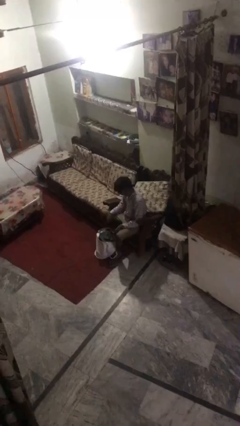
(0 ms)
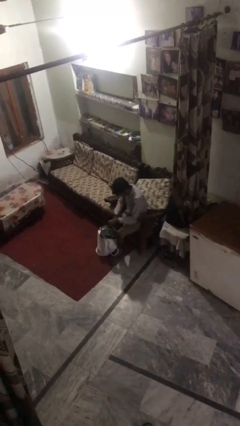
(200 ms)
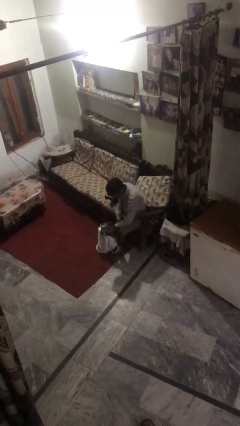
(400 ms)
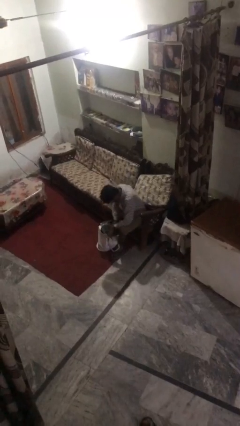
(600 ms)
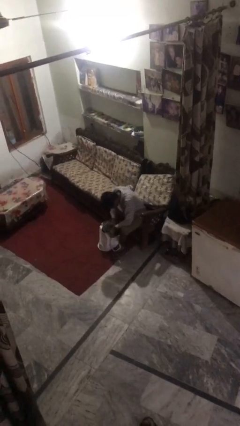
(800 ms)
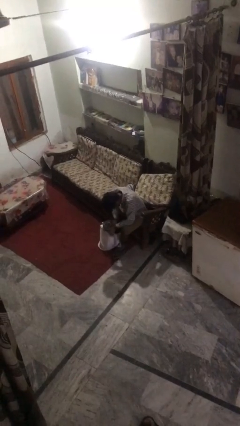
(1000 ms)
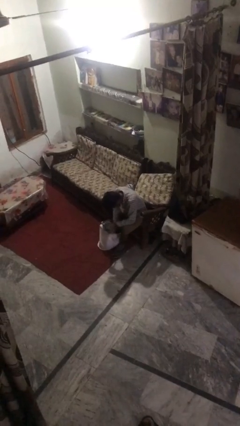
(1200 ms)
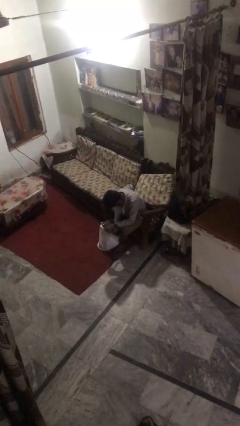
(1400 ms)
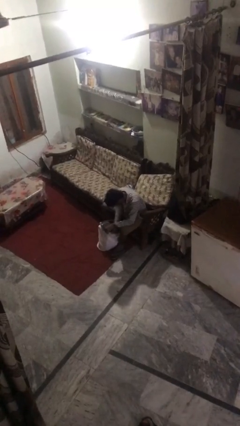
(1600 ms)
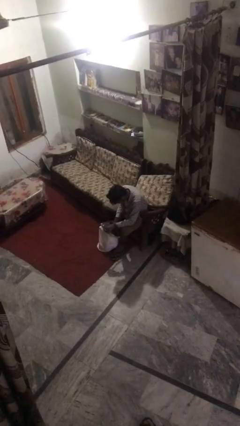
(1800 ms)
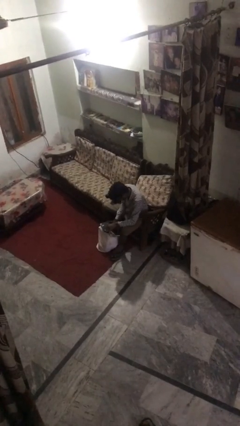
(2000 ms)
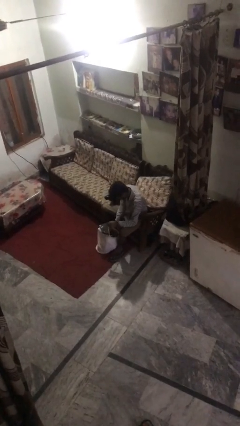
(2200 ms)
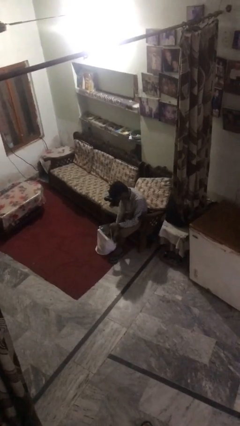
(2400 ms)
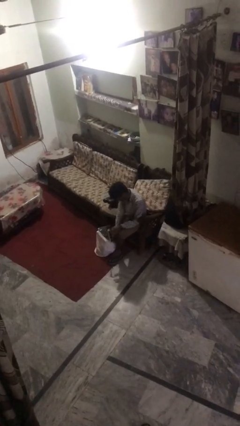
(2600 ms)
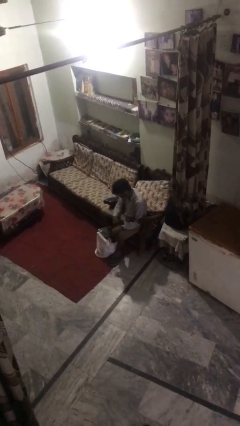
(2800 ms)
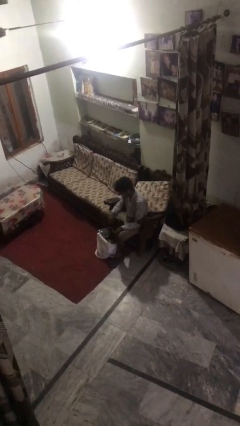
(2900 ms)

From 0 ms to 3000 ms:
person searches under bed

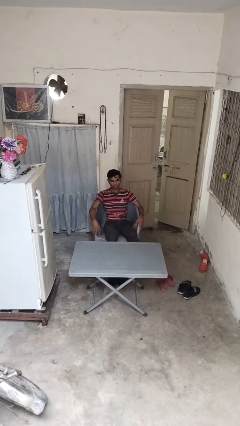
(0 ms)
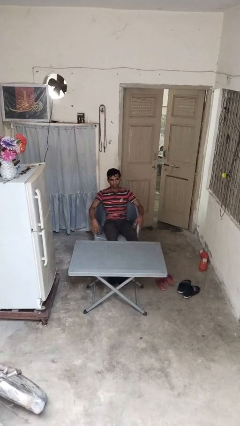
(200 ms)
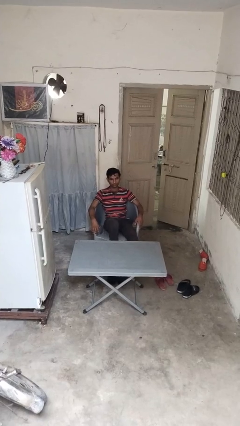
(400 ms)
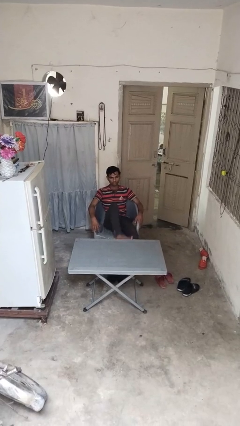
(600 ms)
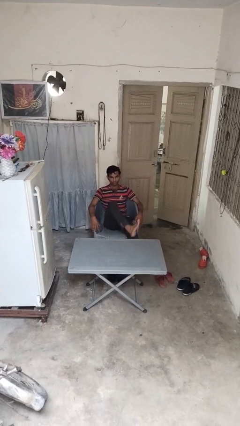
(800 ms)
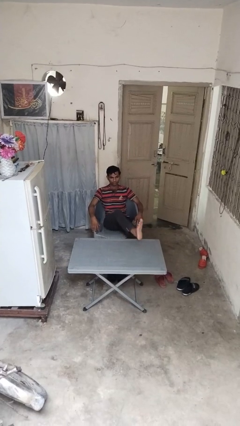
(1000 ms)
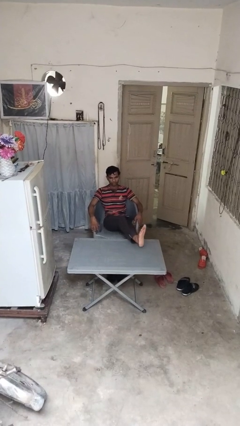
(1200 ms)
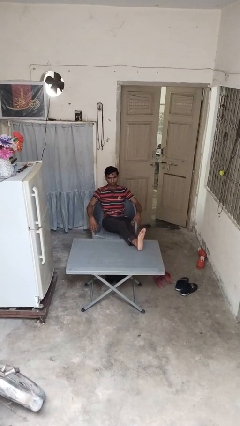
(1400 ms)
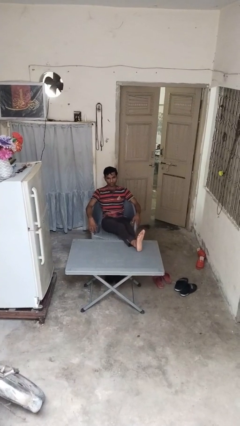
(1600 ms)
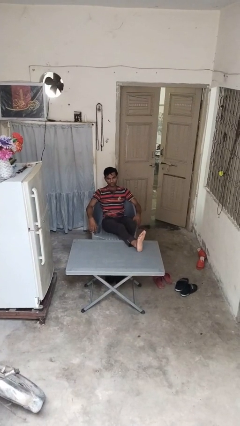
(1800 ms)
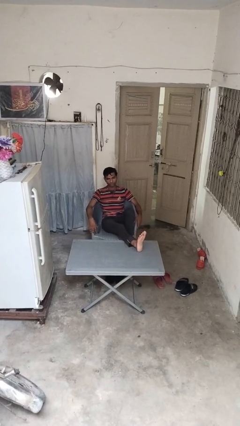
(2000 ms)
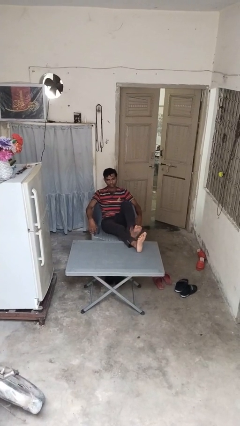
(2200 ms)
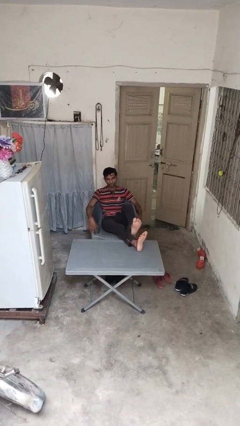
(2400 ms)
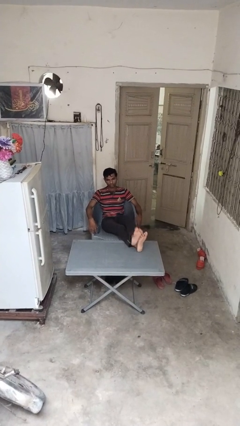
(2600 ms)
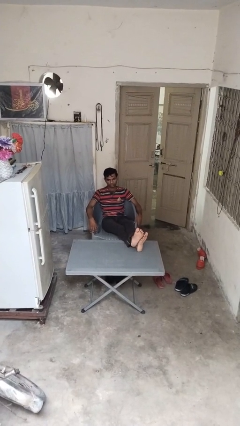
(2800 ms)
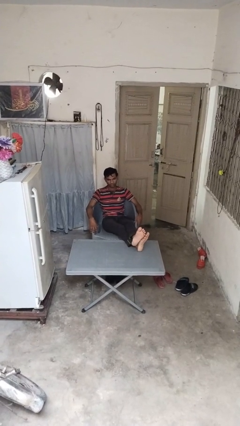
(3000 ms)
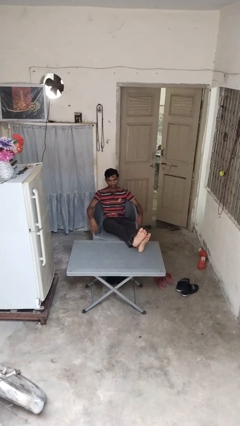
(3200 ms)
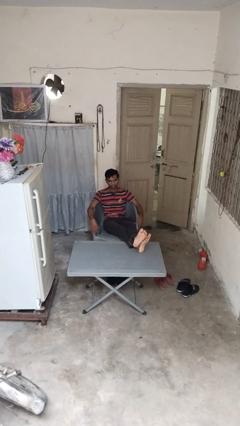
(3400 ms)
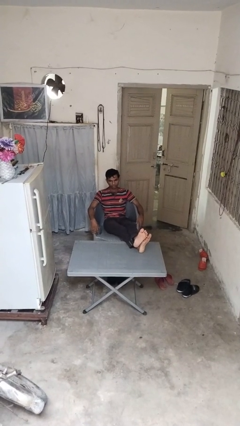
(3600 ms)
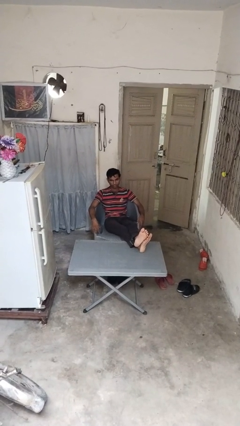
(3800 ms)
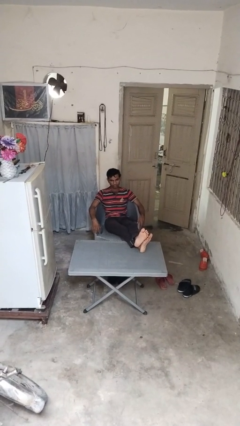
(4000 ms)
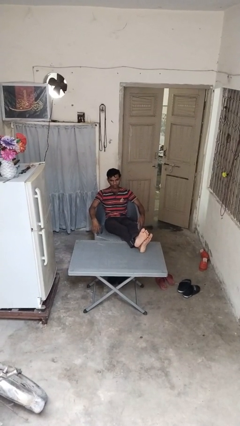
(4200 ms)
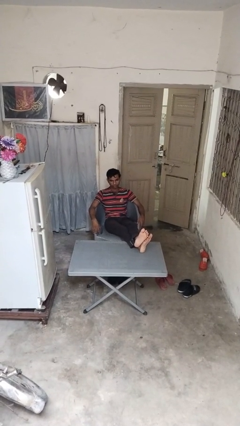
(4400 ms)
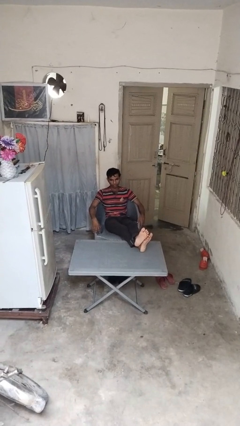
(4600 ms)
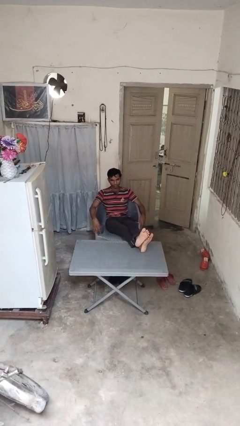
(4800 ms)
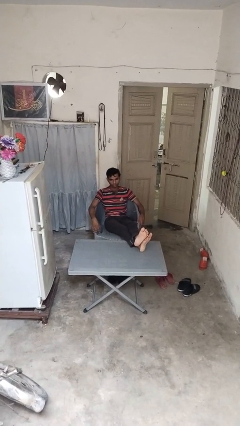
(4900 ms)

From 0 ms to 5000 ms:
person puts feet up

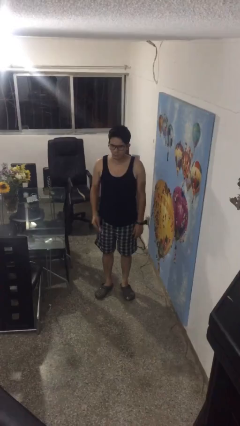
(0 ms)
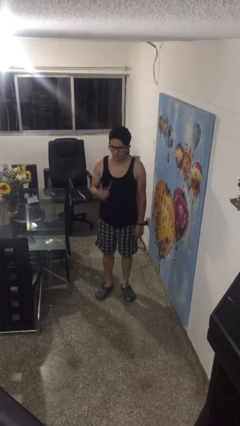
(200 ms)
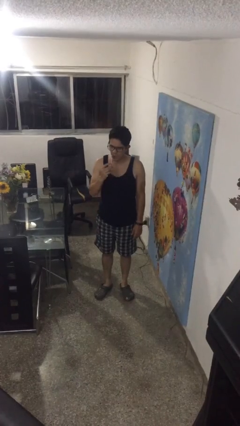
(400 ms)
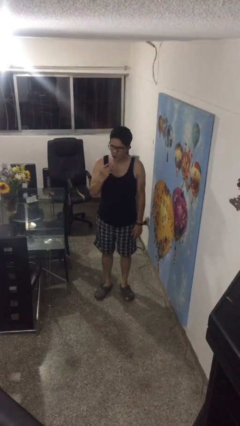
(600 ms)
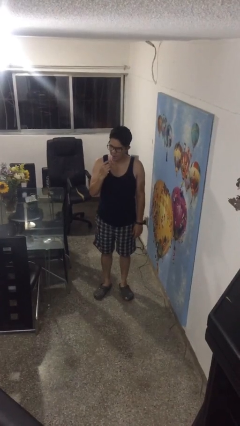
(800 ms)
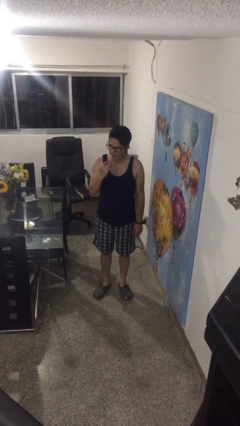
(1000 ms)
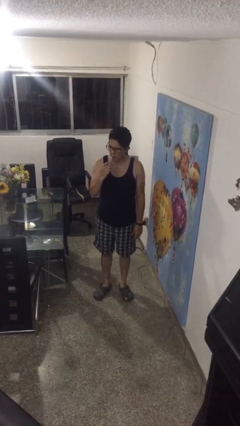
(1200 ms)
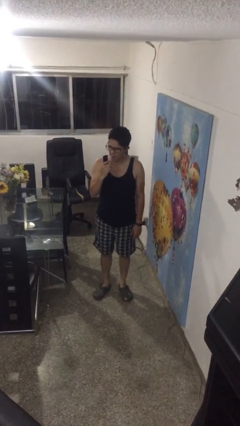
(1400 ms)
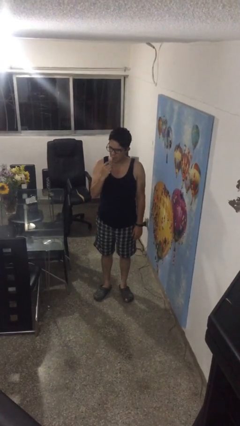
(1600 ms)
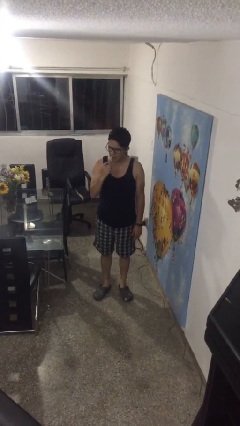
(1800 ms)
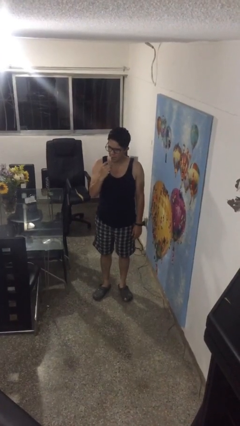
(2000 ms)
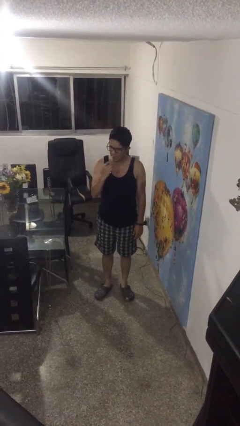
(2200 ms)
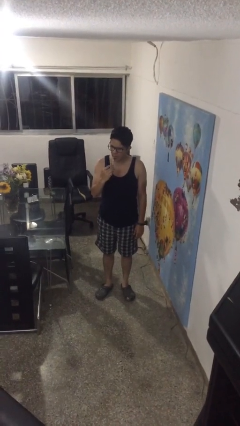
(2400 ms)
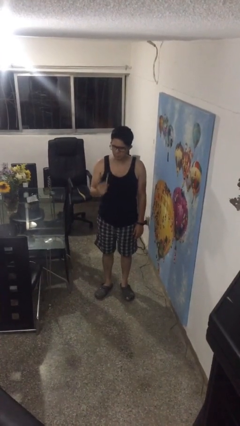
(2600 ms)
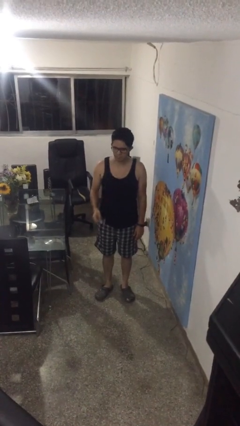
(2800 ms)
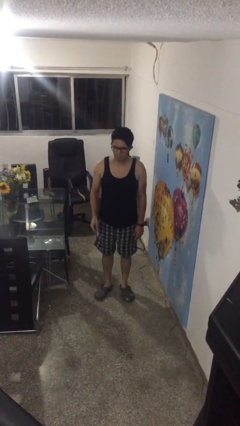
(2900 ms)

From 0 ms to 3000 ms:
person brushes teeth

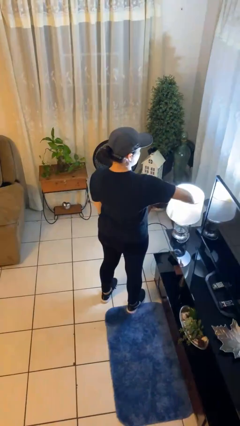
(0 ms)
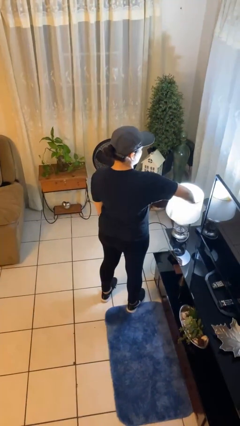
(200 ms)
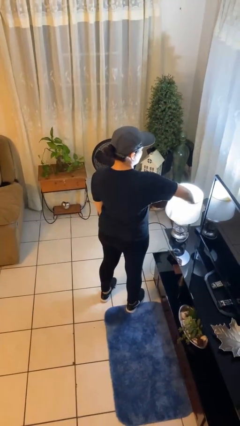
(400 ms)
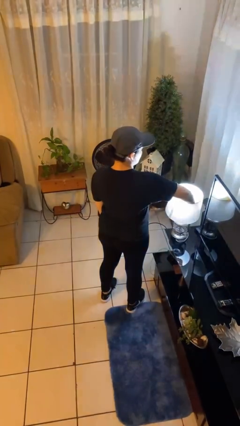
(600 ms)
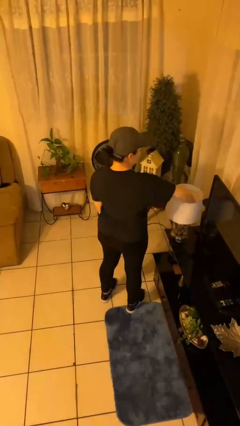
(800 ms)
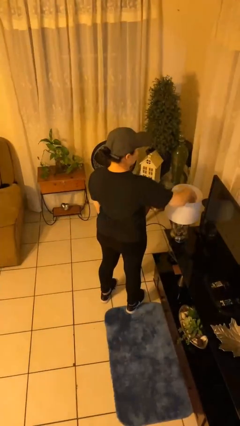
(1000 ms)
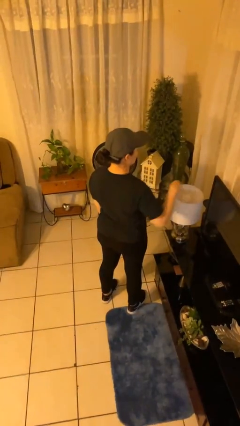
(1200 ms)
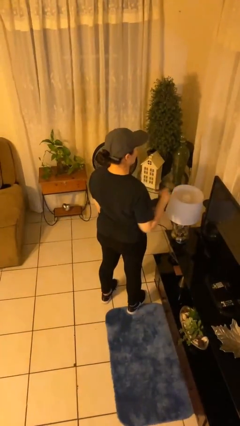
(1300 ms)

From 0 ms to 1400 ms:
person turns off lamp

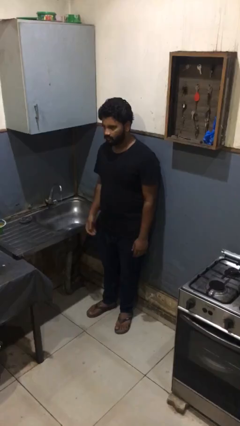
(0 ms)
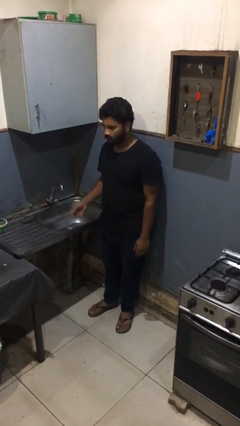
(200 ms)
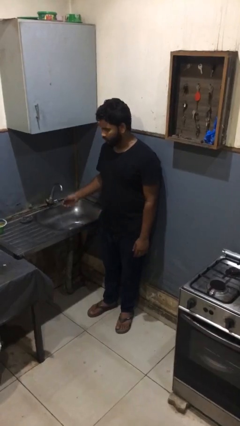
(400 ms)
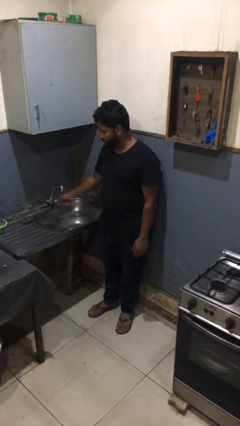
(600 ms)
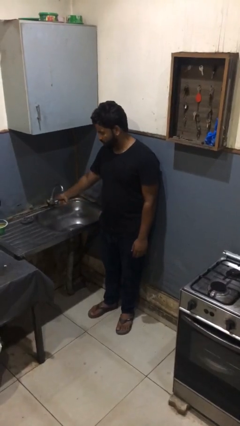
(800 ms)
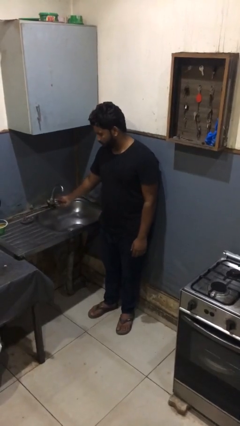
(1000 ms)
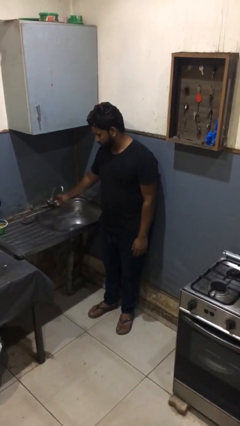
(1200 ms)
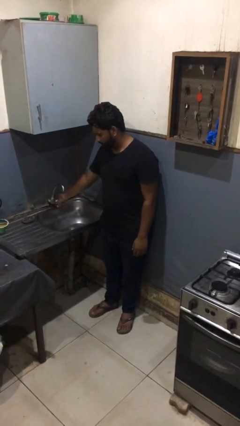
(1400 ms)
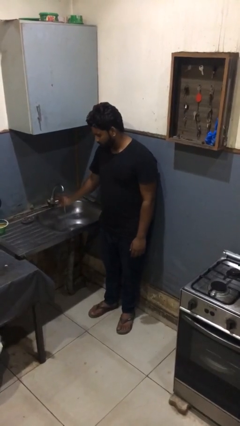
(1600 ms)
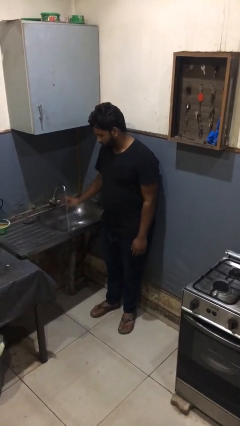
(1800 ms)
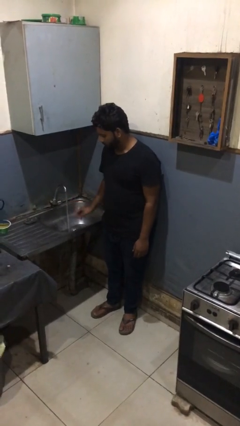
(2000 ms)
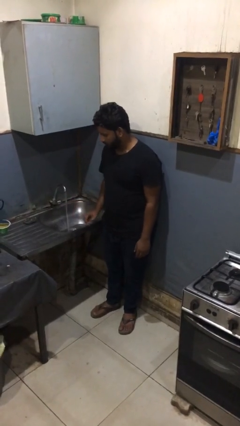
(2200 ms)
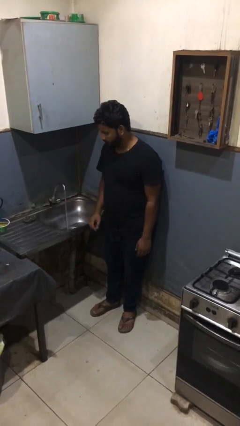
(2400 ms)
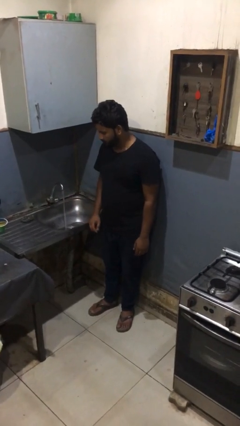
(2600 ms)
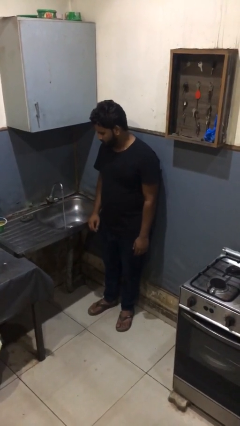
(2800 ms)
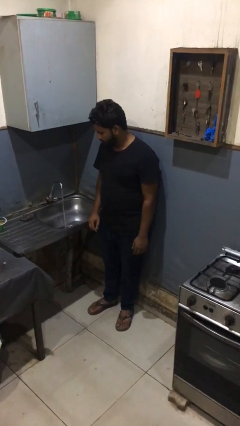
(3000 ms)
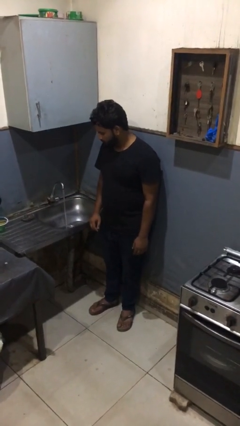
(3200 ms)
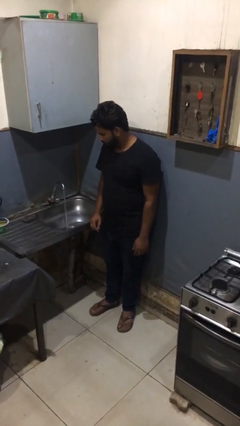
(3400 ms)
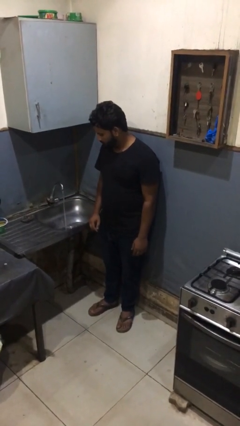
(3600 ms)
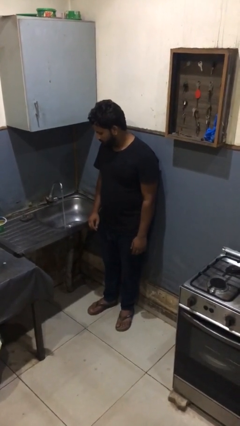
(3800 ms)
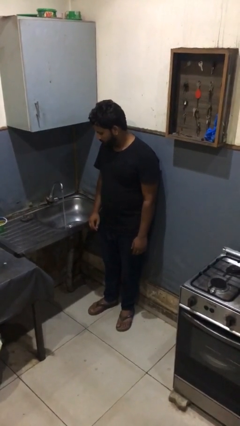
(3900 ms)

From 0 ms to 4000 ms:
person turns on faucet

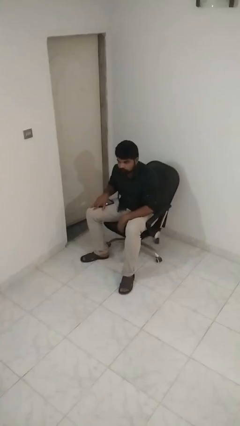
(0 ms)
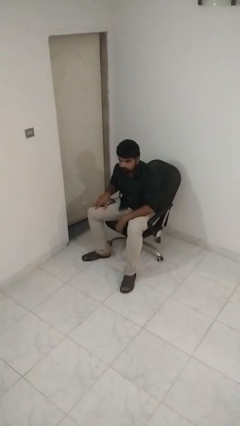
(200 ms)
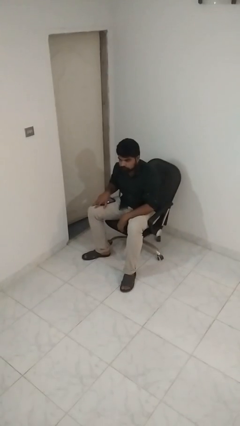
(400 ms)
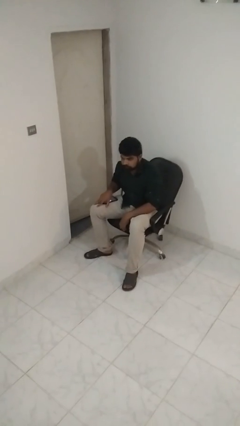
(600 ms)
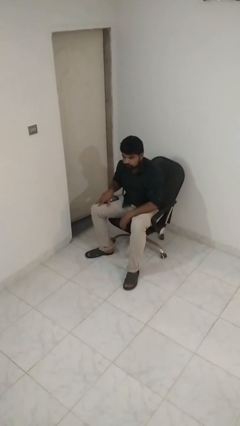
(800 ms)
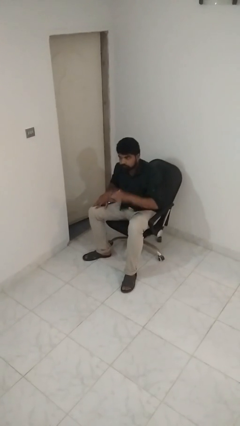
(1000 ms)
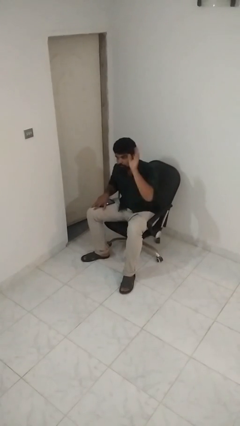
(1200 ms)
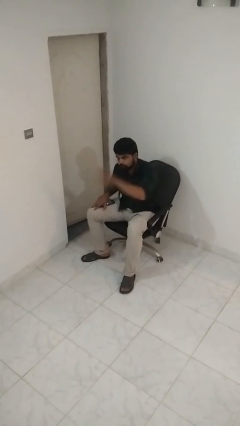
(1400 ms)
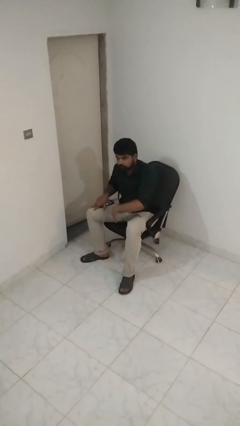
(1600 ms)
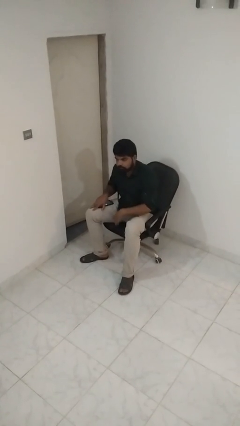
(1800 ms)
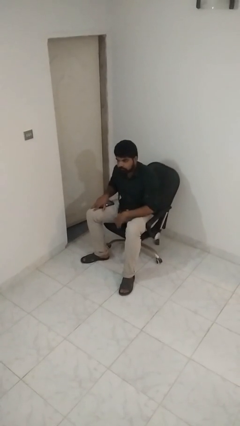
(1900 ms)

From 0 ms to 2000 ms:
person gestures swipe down
